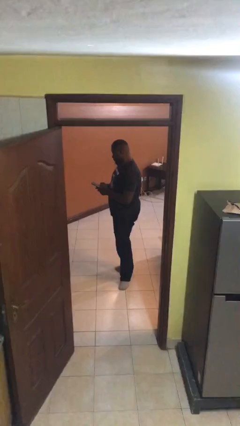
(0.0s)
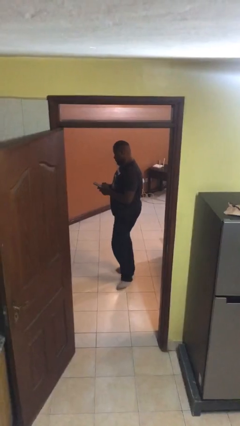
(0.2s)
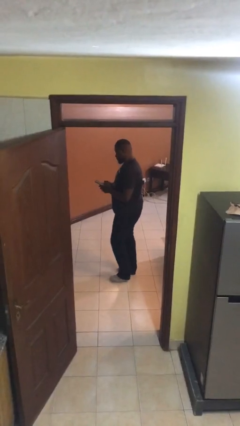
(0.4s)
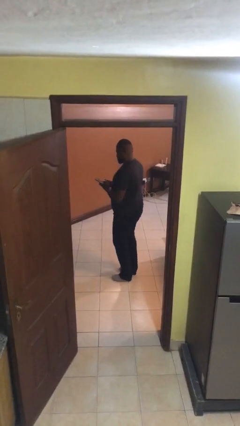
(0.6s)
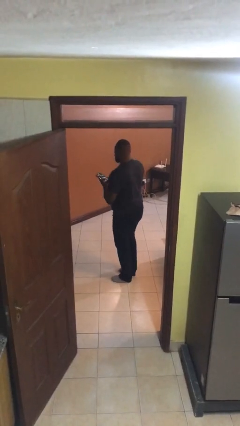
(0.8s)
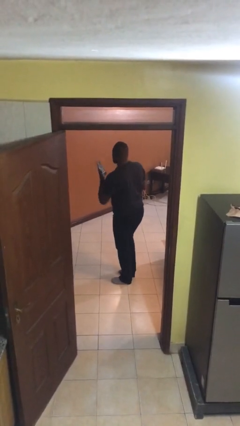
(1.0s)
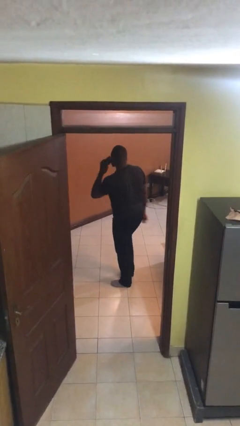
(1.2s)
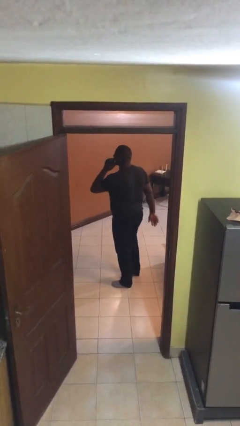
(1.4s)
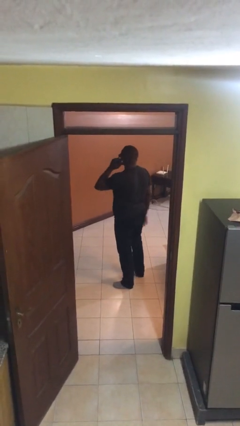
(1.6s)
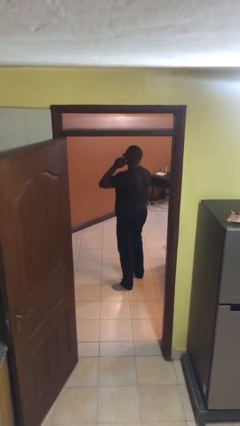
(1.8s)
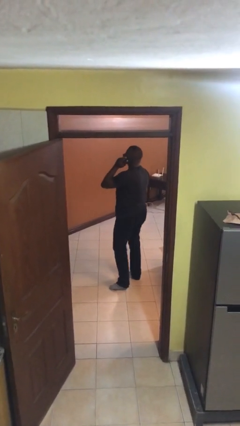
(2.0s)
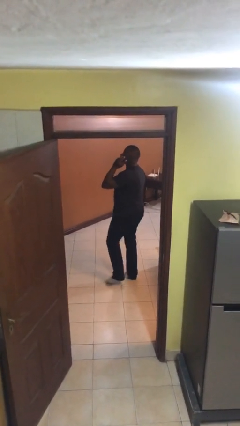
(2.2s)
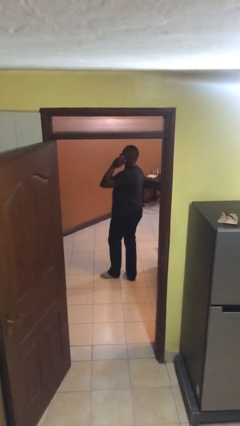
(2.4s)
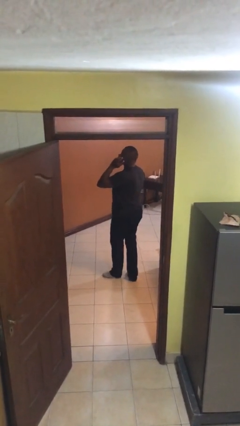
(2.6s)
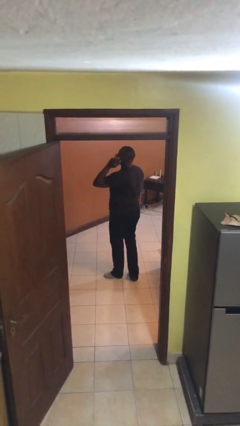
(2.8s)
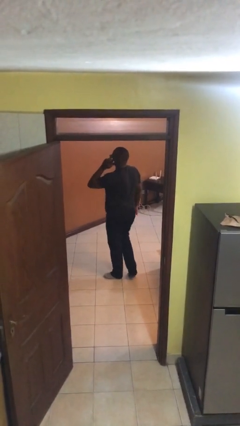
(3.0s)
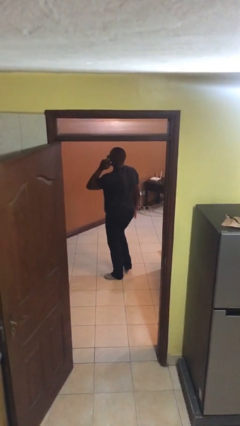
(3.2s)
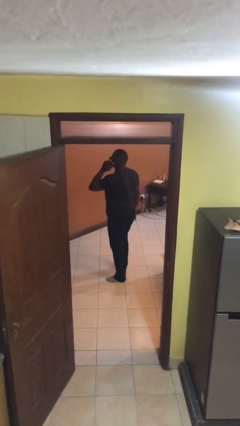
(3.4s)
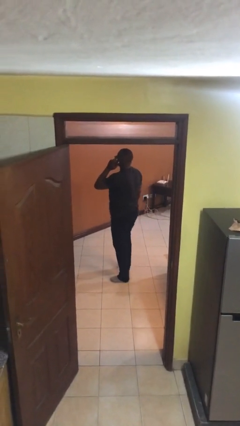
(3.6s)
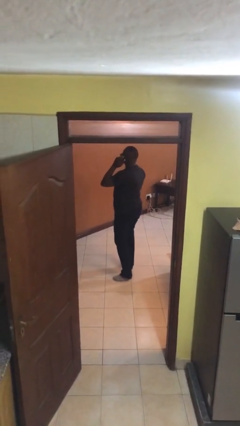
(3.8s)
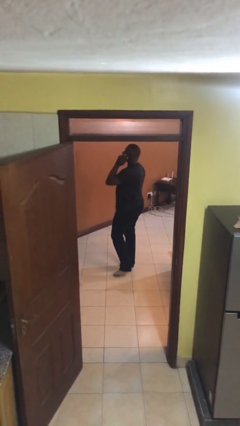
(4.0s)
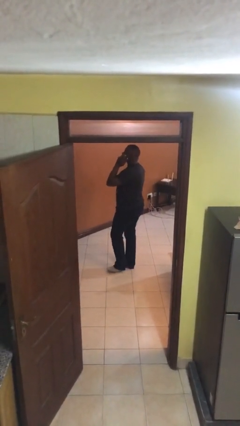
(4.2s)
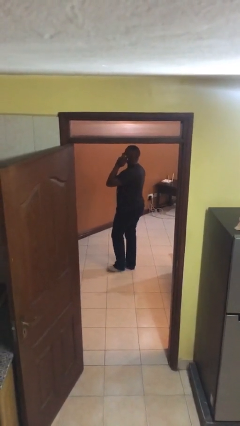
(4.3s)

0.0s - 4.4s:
person talks on phone

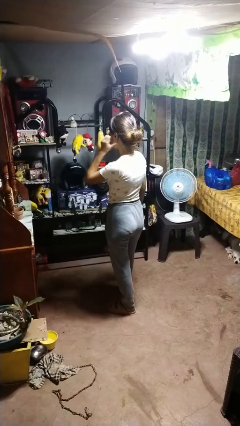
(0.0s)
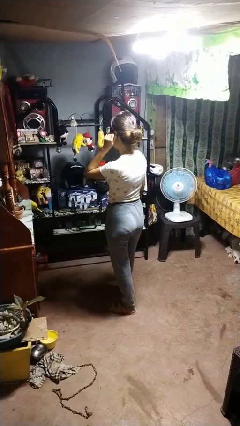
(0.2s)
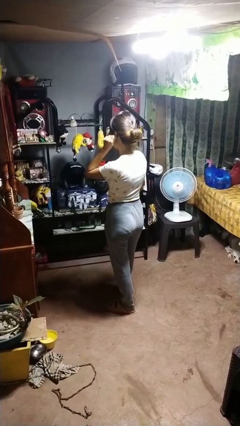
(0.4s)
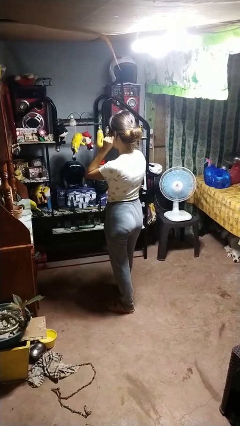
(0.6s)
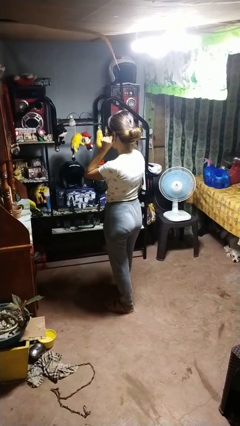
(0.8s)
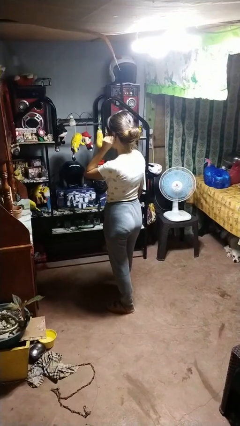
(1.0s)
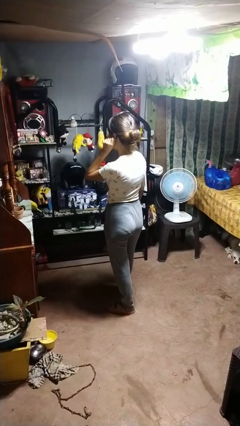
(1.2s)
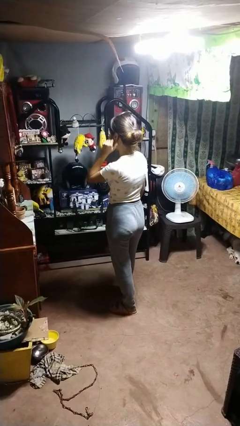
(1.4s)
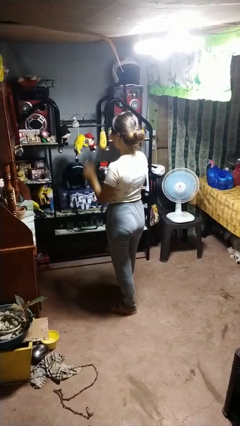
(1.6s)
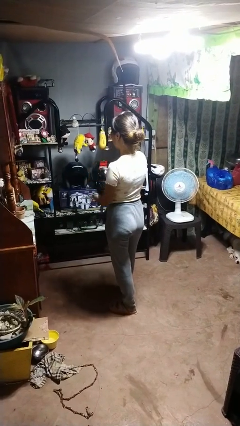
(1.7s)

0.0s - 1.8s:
person touches earlobe

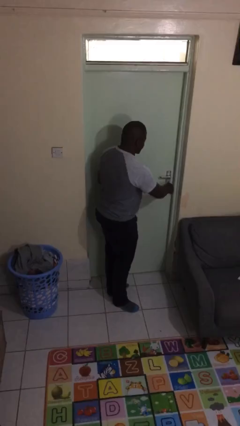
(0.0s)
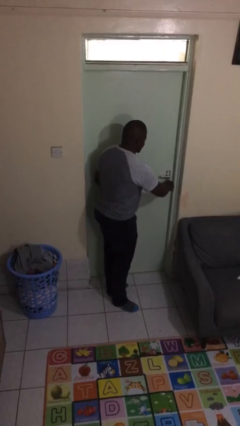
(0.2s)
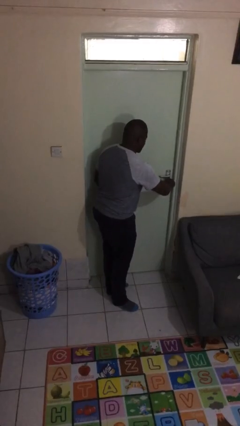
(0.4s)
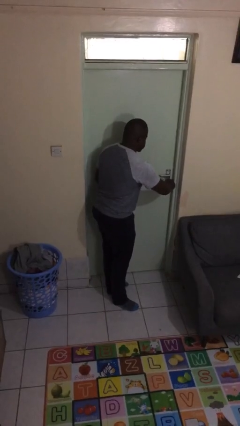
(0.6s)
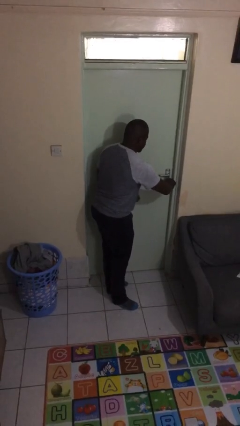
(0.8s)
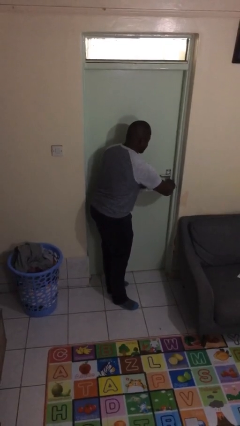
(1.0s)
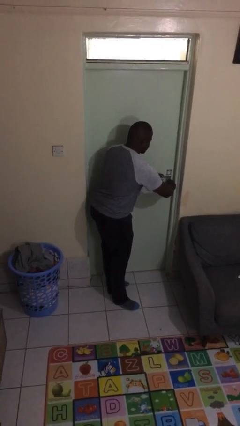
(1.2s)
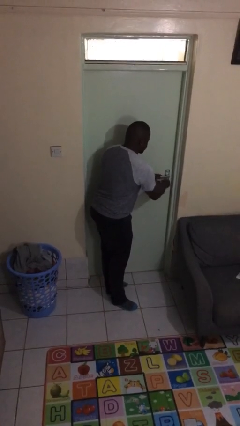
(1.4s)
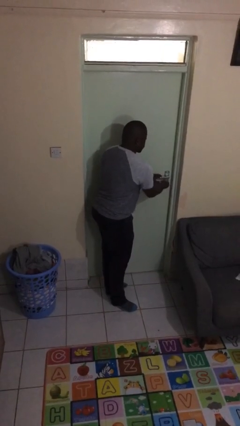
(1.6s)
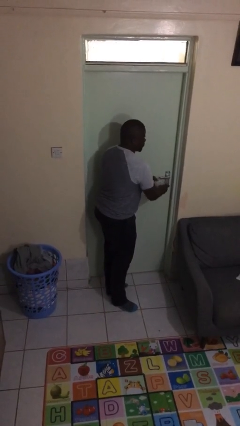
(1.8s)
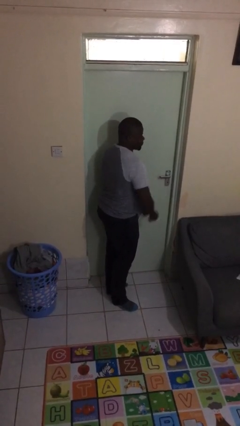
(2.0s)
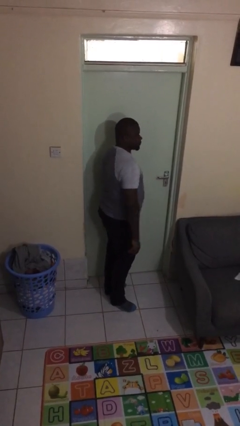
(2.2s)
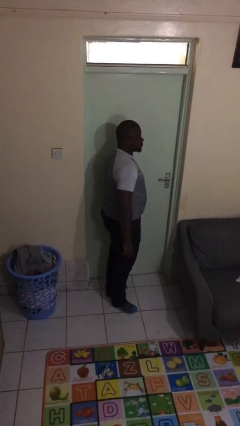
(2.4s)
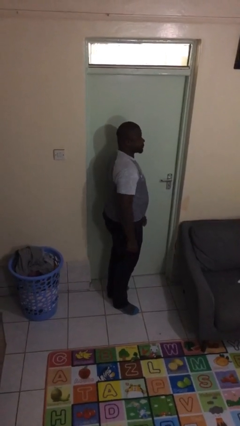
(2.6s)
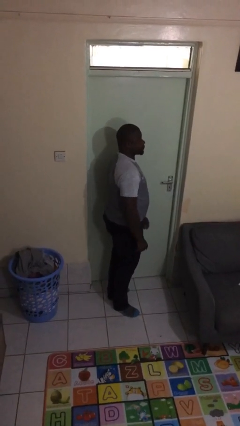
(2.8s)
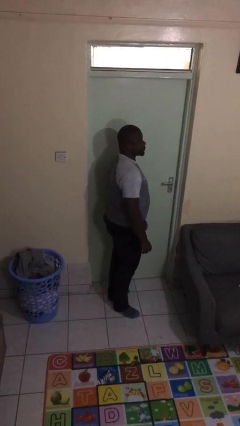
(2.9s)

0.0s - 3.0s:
person locks door with keys

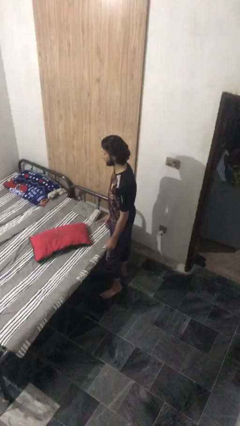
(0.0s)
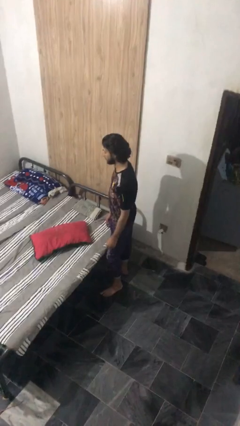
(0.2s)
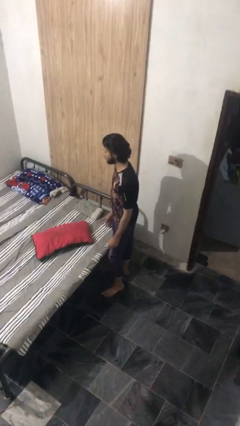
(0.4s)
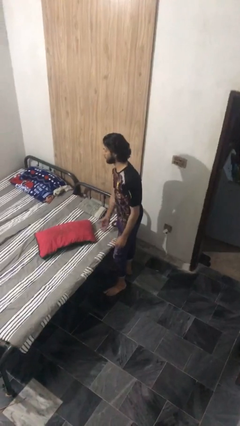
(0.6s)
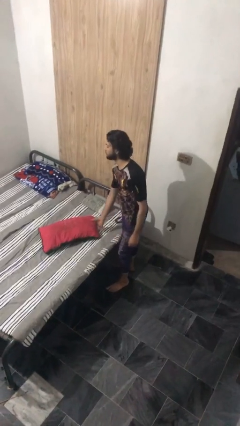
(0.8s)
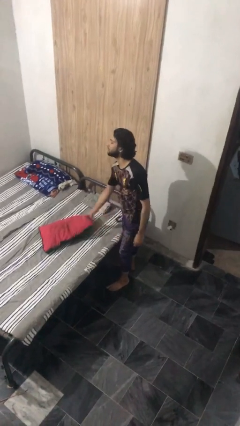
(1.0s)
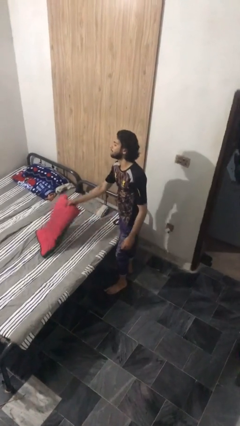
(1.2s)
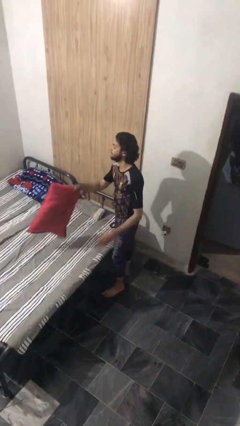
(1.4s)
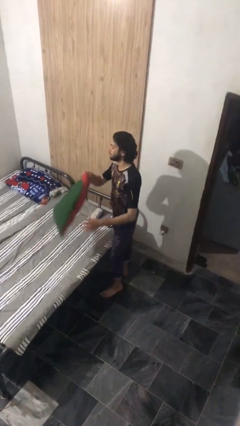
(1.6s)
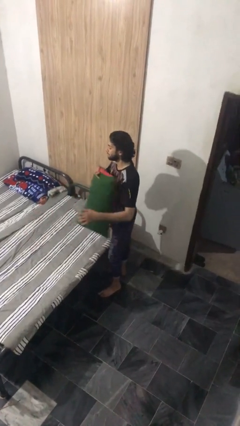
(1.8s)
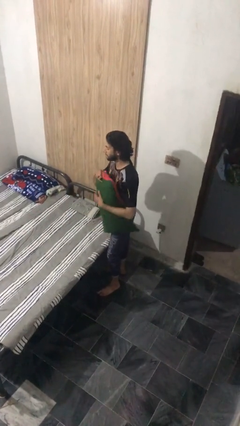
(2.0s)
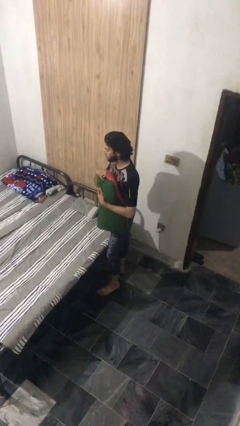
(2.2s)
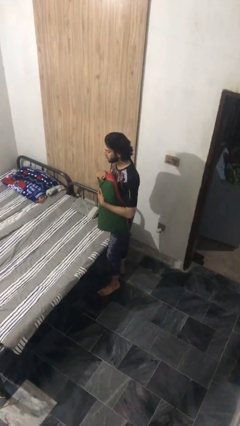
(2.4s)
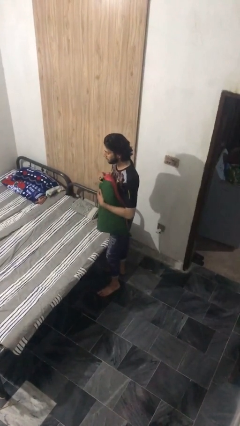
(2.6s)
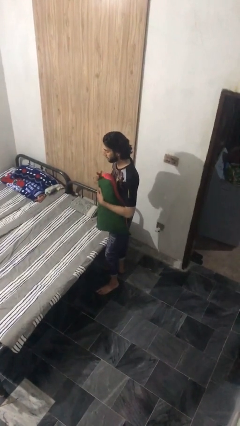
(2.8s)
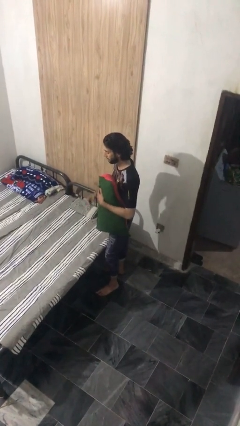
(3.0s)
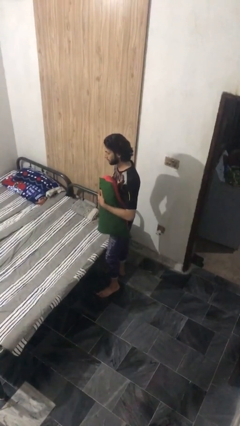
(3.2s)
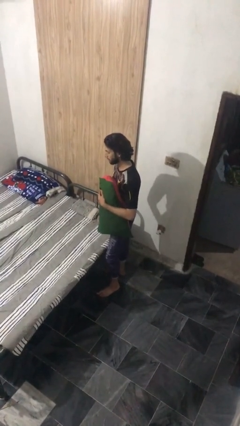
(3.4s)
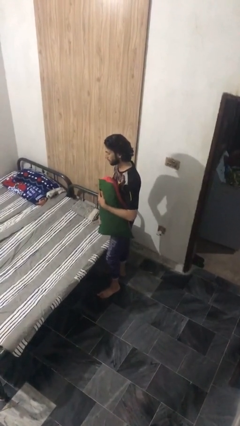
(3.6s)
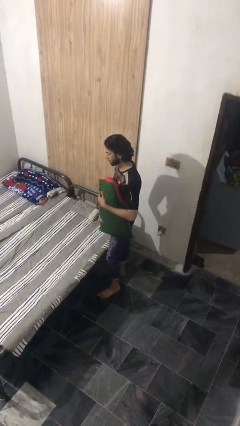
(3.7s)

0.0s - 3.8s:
person picks up object from bed

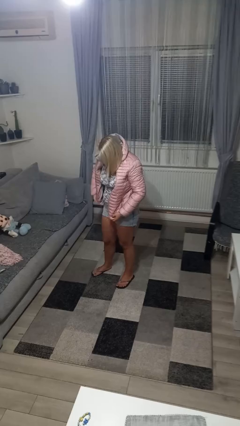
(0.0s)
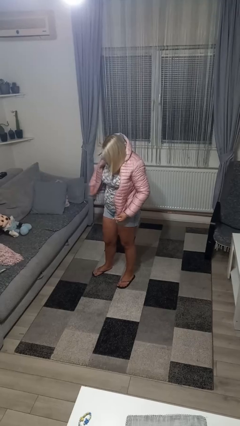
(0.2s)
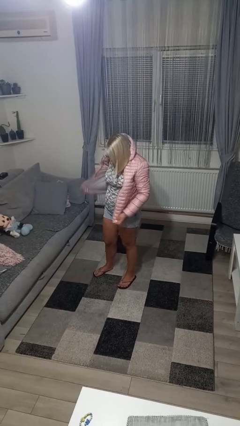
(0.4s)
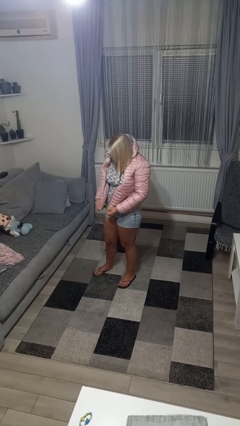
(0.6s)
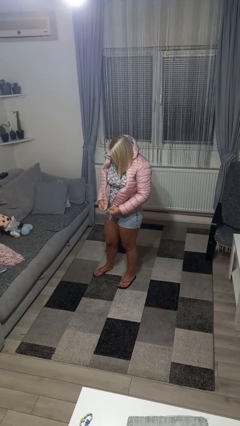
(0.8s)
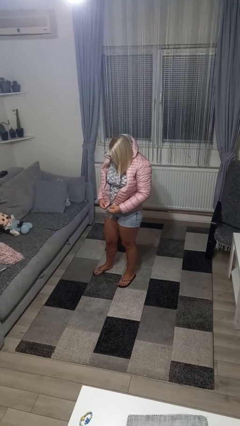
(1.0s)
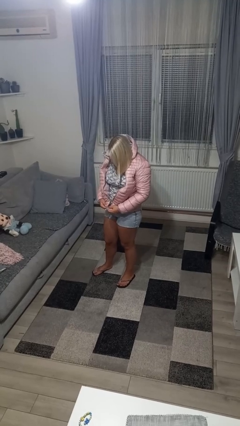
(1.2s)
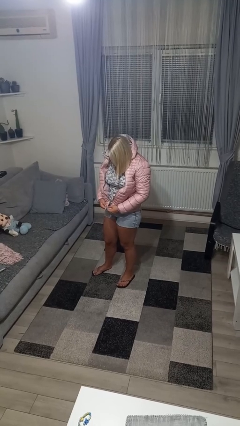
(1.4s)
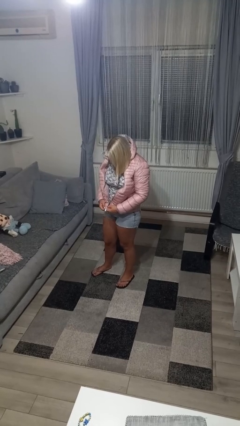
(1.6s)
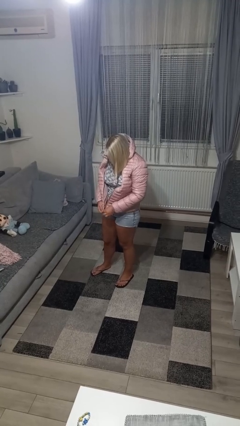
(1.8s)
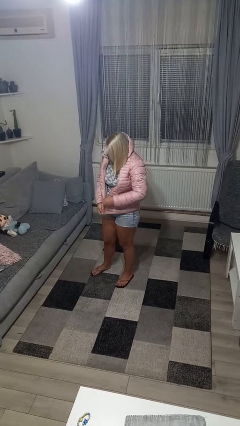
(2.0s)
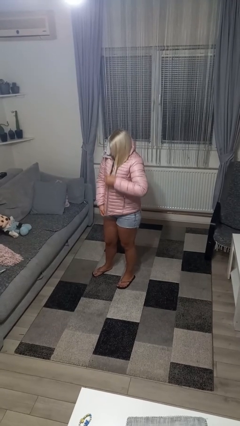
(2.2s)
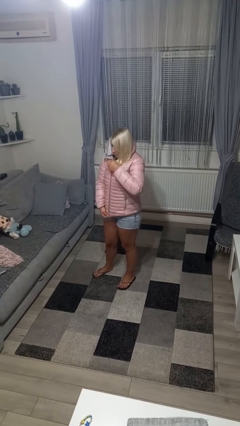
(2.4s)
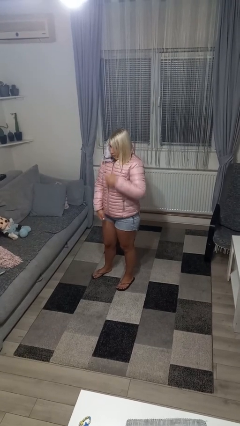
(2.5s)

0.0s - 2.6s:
person zips up jacket

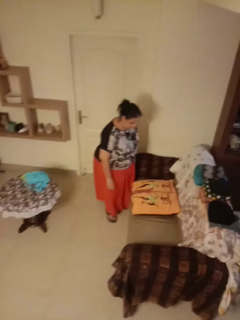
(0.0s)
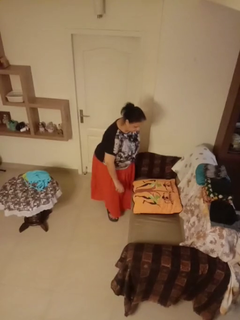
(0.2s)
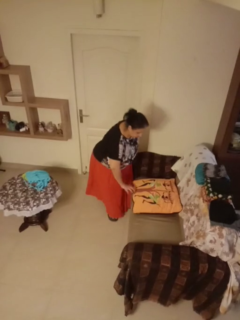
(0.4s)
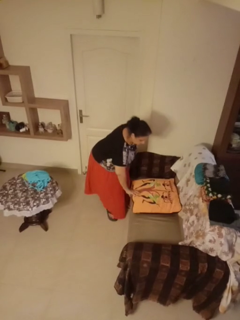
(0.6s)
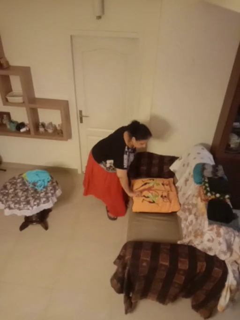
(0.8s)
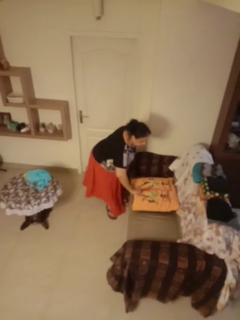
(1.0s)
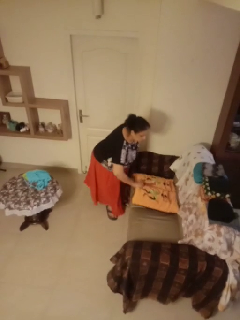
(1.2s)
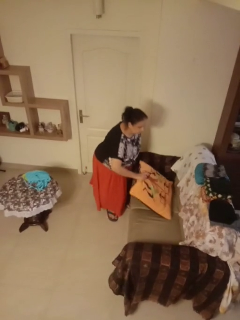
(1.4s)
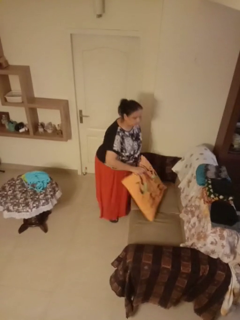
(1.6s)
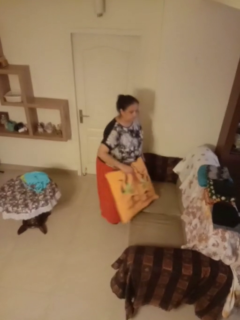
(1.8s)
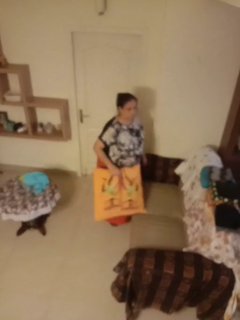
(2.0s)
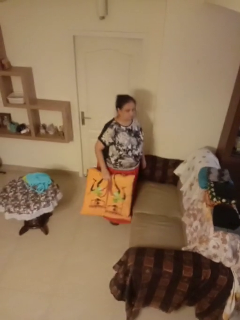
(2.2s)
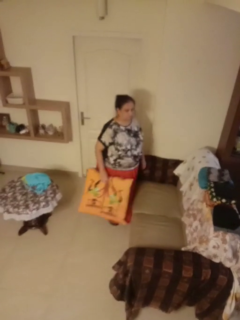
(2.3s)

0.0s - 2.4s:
person picks up object from couch

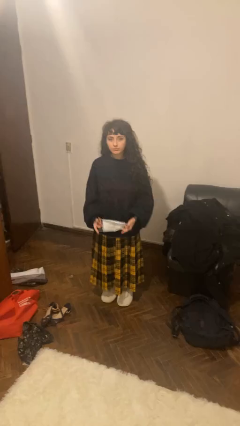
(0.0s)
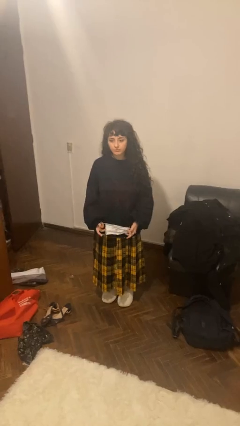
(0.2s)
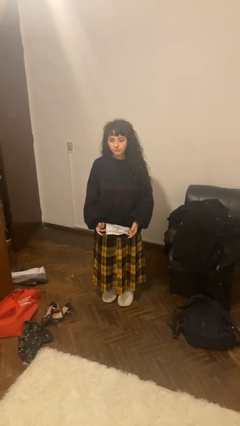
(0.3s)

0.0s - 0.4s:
person puts on facemask
